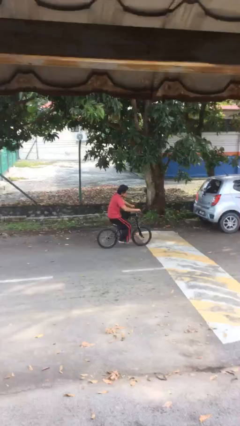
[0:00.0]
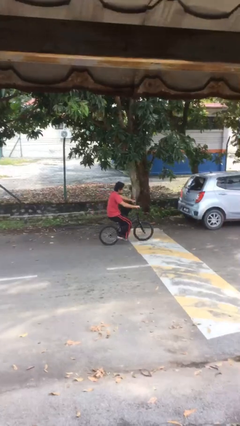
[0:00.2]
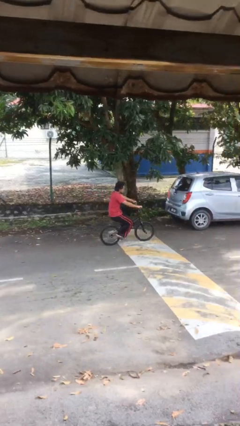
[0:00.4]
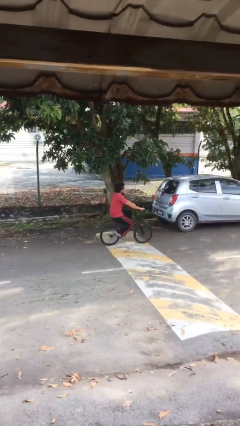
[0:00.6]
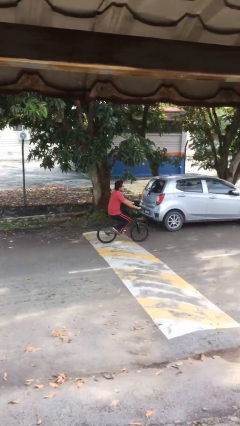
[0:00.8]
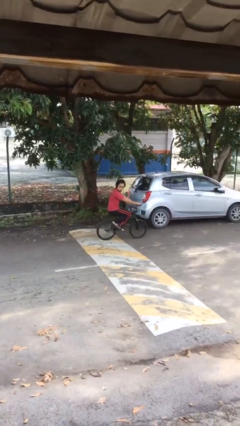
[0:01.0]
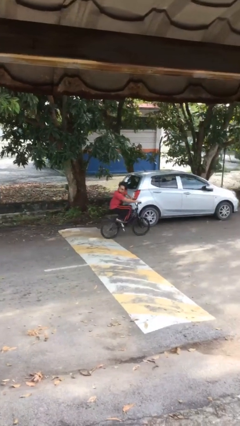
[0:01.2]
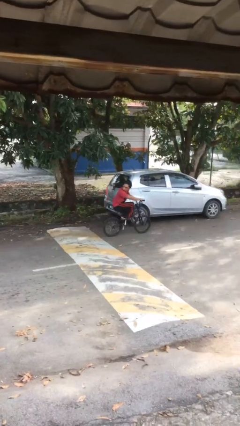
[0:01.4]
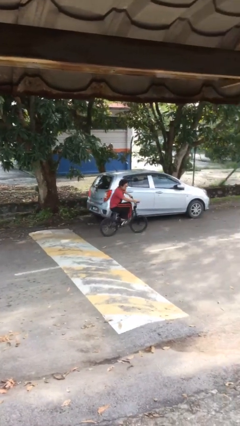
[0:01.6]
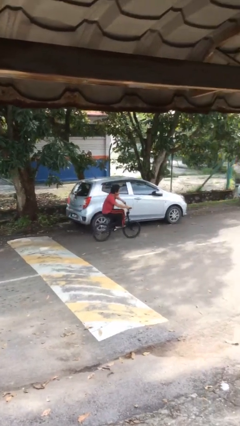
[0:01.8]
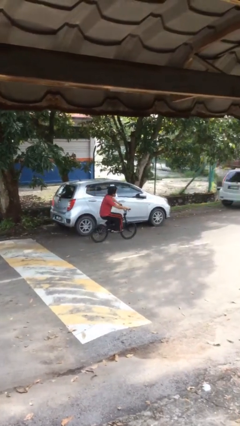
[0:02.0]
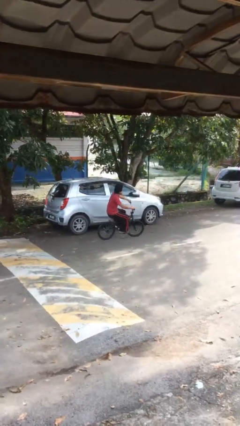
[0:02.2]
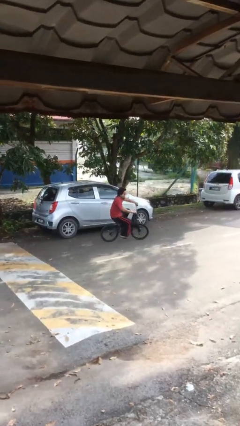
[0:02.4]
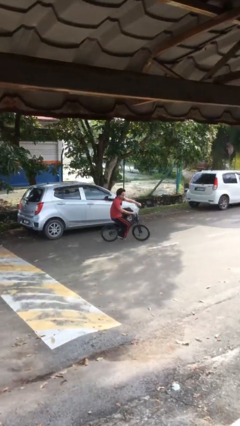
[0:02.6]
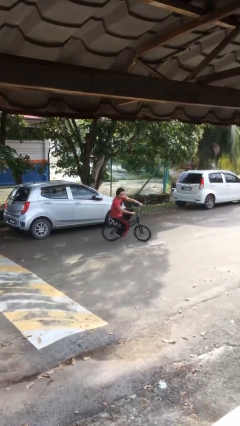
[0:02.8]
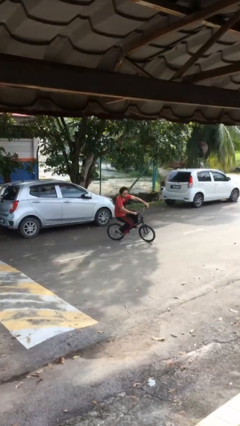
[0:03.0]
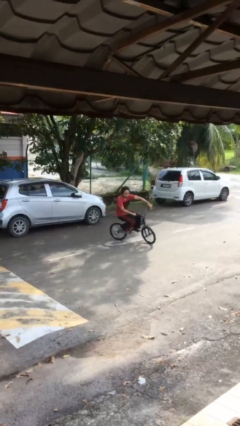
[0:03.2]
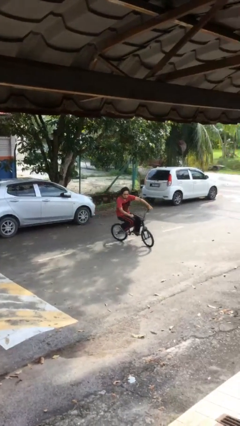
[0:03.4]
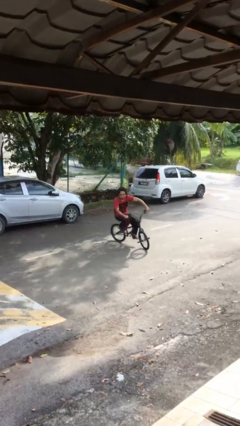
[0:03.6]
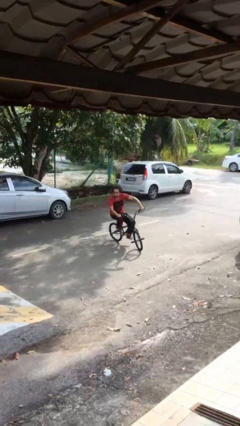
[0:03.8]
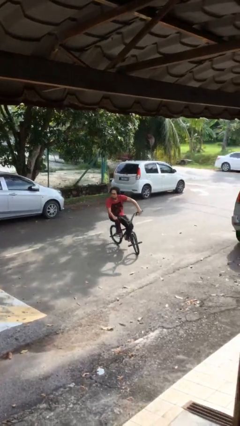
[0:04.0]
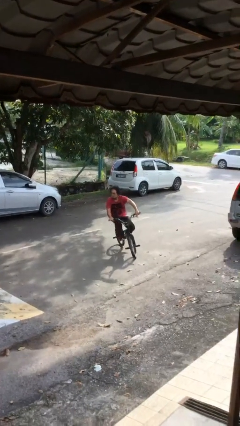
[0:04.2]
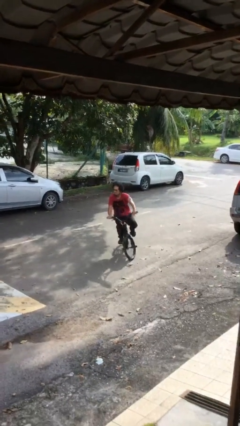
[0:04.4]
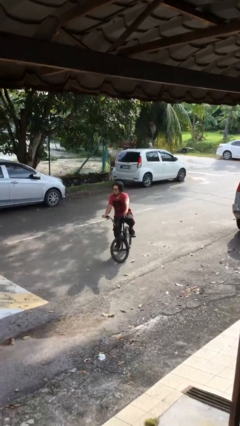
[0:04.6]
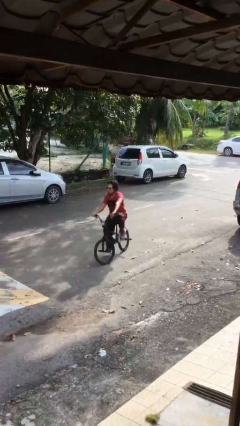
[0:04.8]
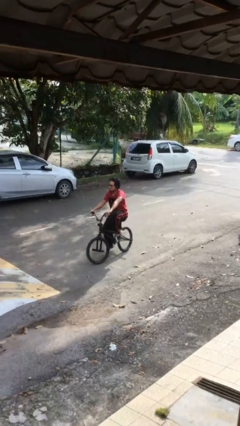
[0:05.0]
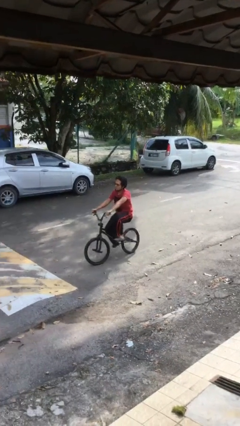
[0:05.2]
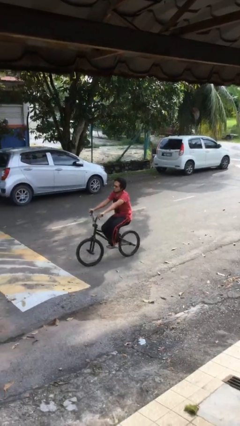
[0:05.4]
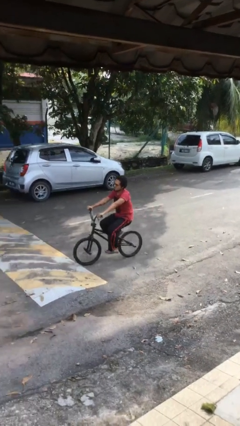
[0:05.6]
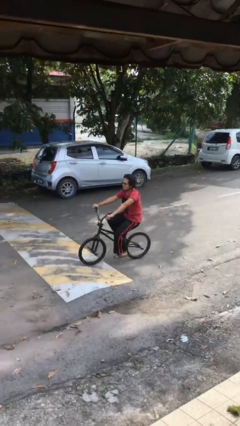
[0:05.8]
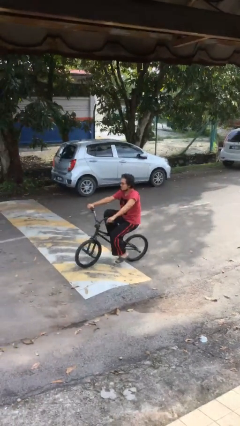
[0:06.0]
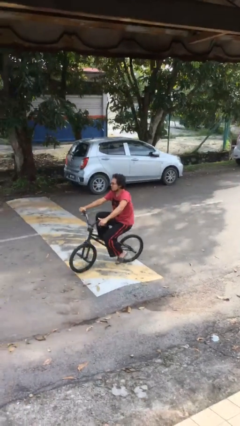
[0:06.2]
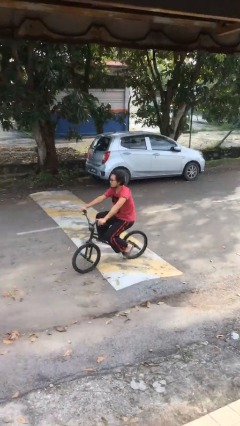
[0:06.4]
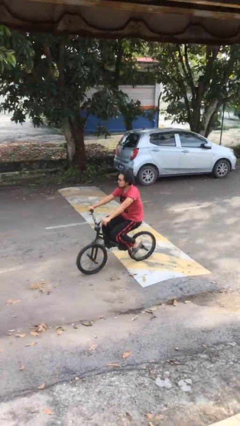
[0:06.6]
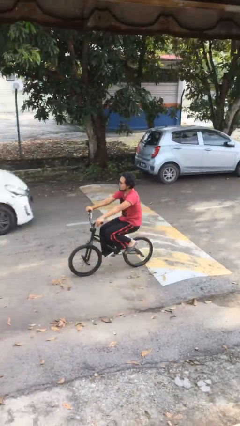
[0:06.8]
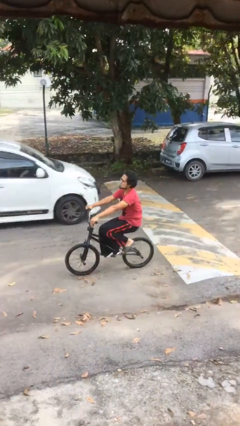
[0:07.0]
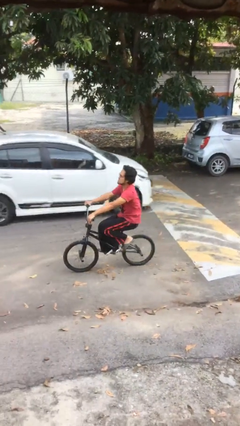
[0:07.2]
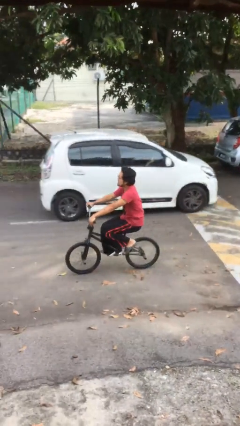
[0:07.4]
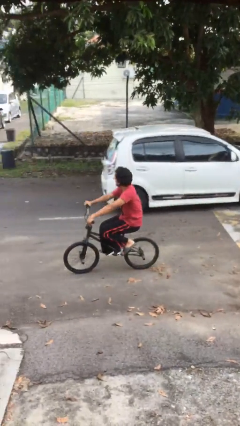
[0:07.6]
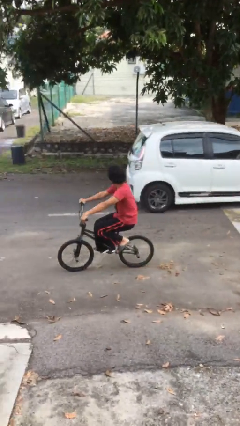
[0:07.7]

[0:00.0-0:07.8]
person rides bicycle

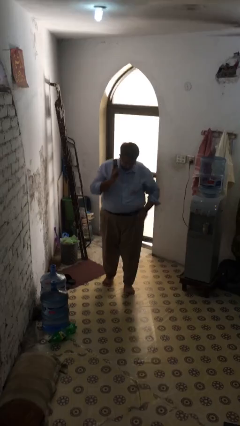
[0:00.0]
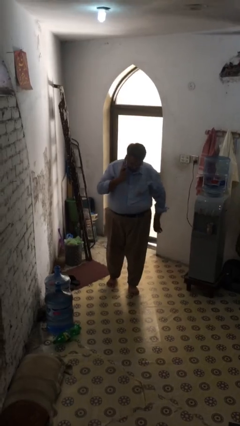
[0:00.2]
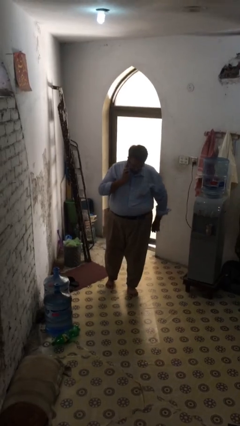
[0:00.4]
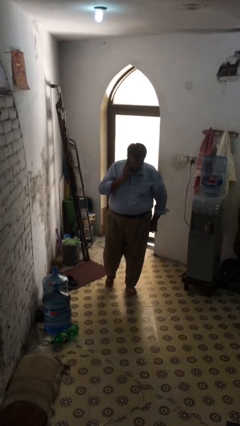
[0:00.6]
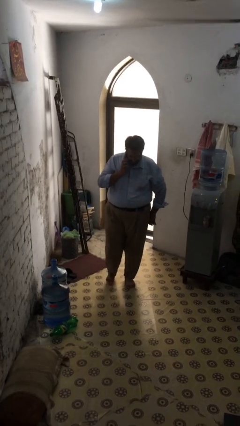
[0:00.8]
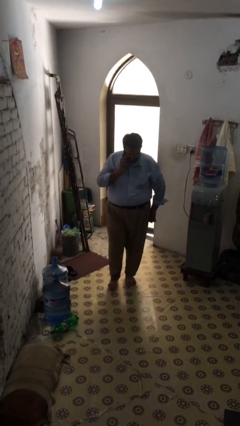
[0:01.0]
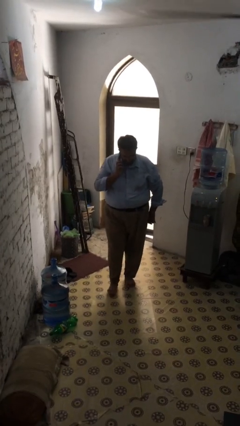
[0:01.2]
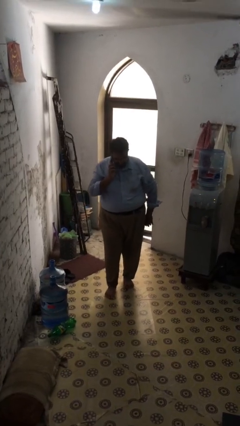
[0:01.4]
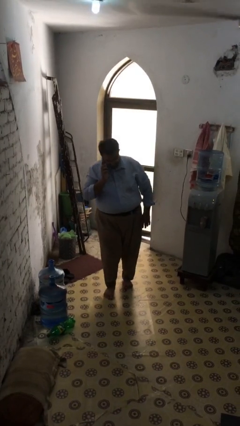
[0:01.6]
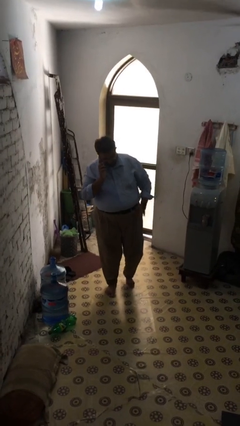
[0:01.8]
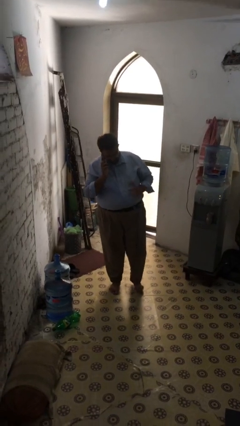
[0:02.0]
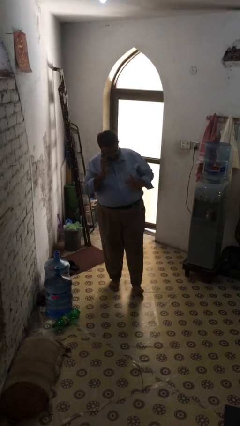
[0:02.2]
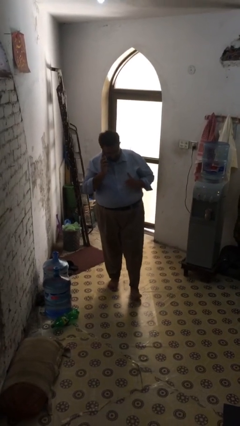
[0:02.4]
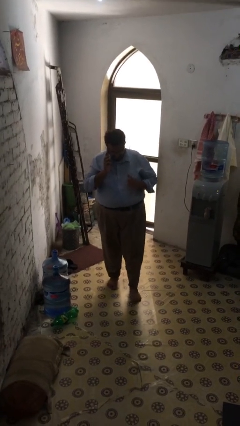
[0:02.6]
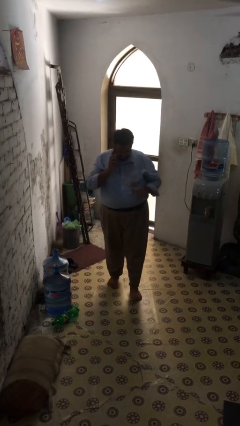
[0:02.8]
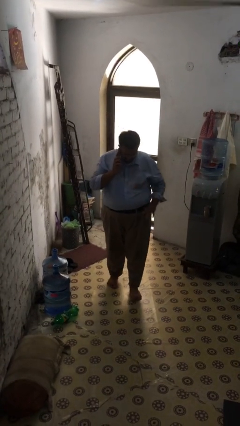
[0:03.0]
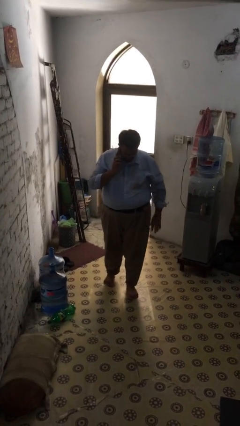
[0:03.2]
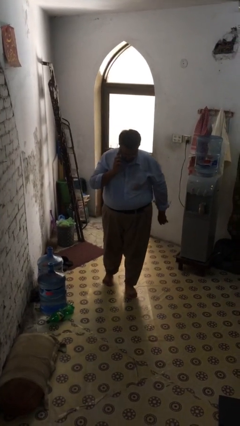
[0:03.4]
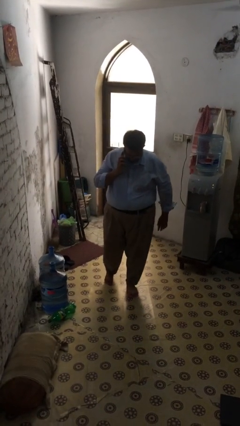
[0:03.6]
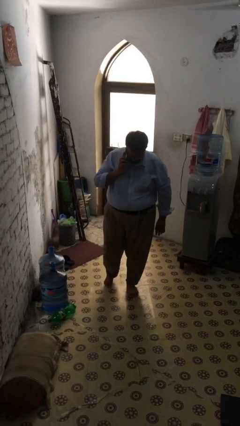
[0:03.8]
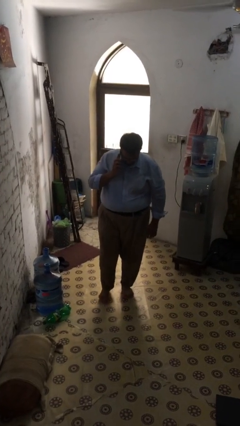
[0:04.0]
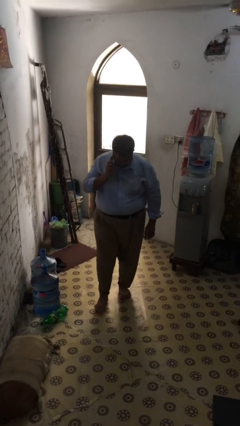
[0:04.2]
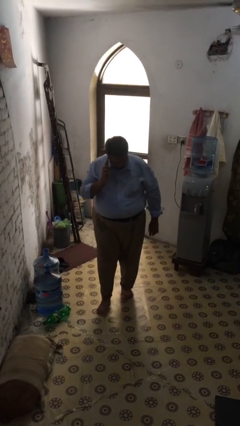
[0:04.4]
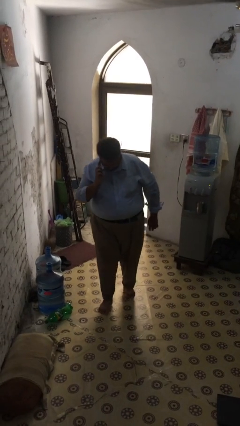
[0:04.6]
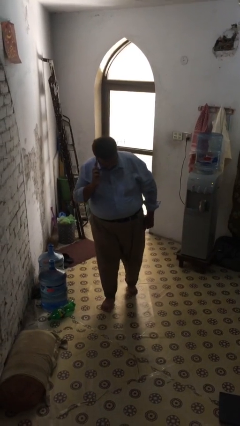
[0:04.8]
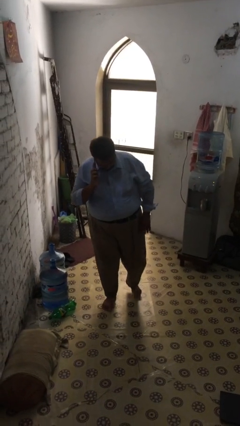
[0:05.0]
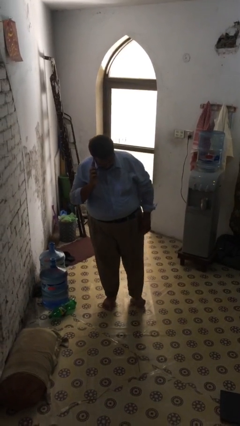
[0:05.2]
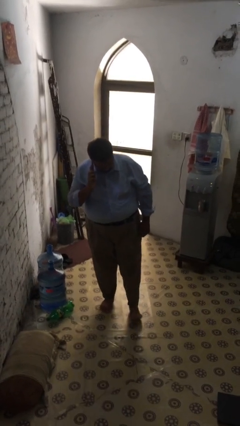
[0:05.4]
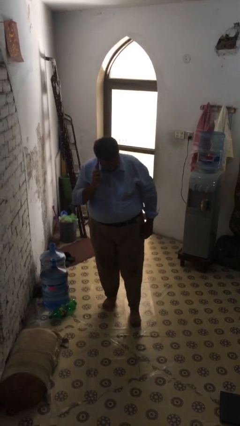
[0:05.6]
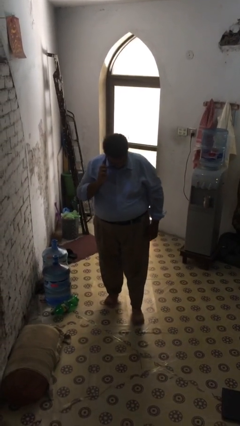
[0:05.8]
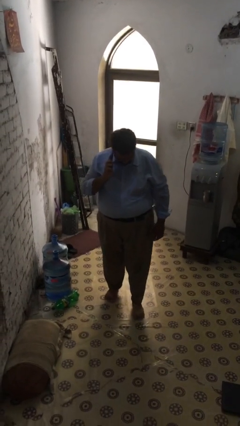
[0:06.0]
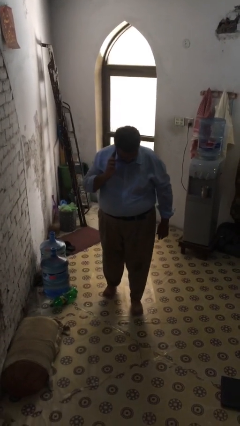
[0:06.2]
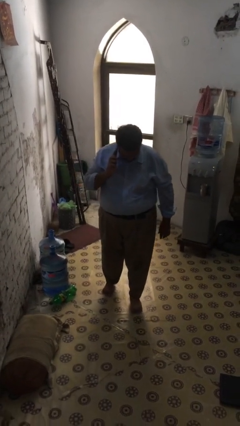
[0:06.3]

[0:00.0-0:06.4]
person talks on phone

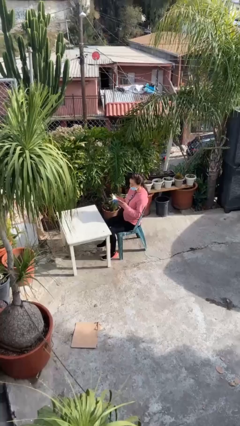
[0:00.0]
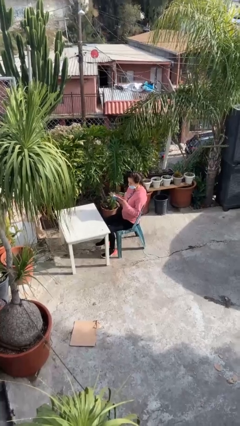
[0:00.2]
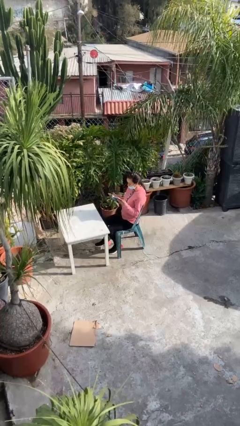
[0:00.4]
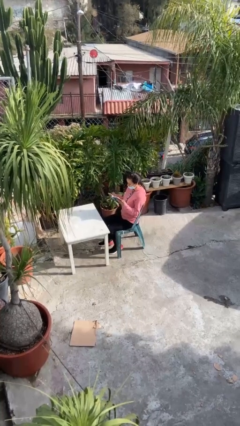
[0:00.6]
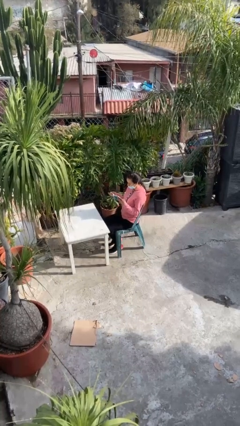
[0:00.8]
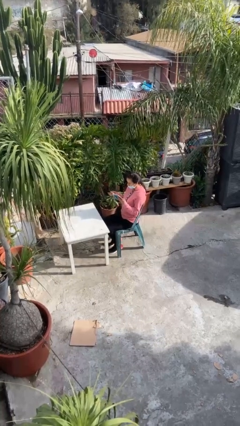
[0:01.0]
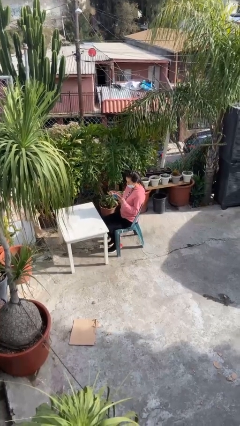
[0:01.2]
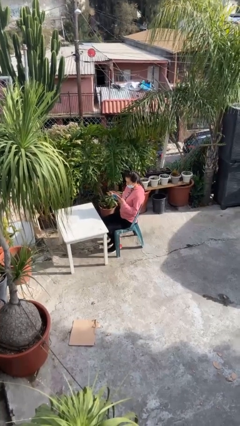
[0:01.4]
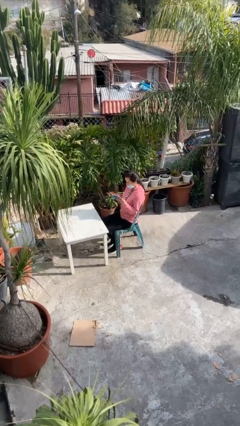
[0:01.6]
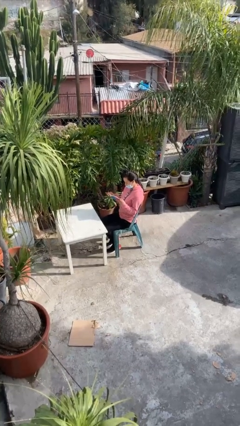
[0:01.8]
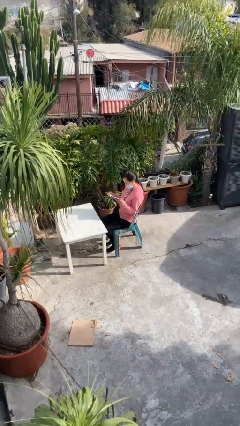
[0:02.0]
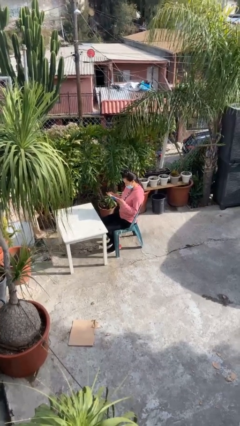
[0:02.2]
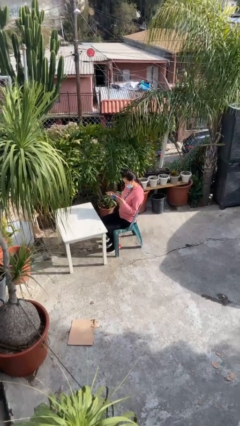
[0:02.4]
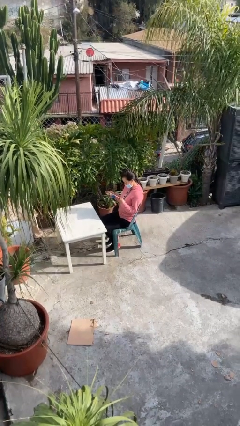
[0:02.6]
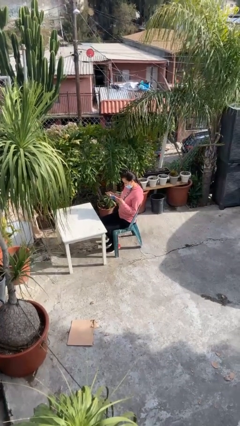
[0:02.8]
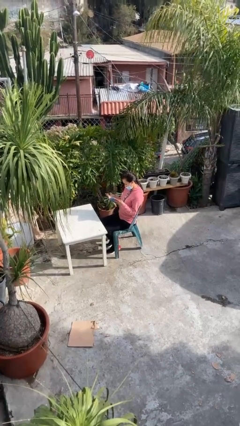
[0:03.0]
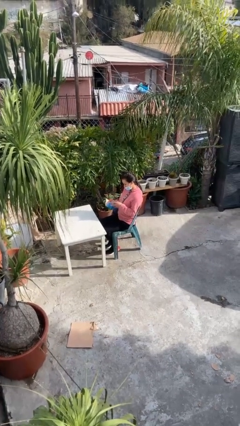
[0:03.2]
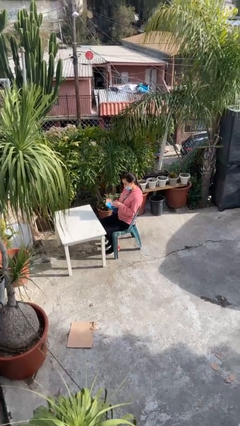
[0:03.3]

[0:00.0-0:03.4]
person reads document
